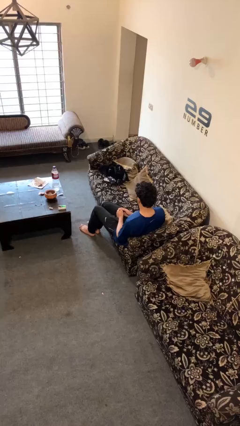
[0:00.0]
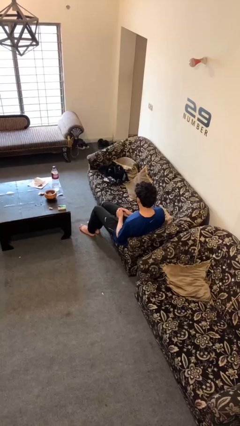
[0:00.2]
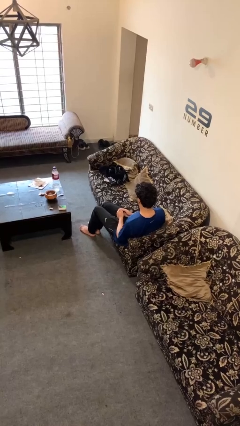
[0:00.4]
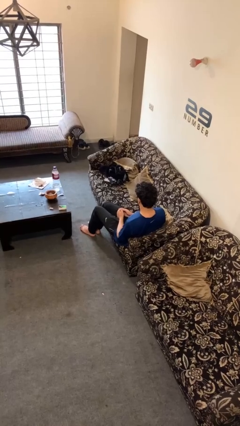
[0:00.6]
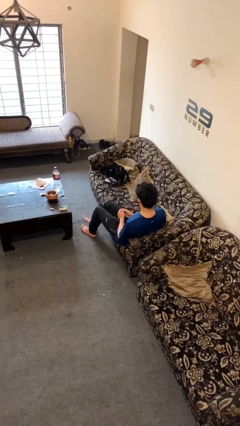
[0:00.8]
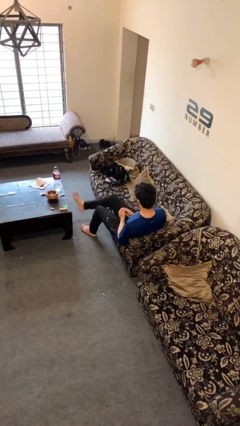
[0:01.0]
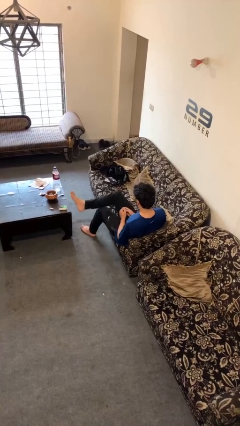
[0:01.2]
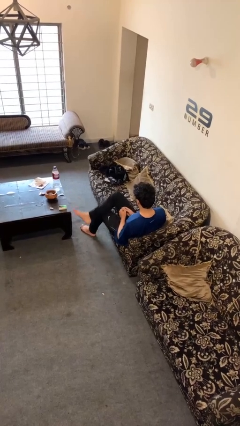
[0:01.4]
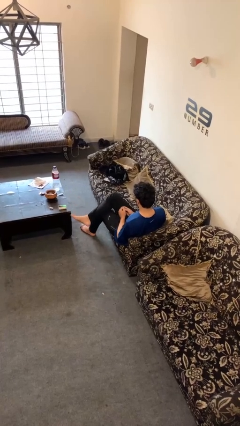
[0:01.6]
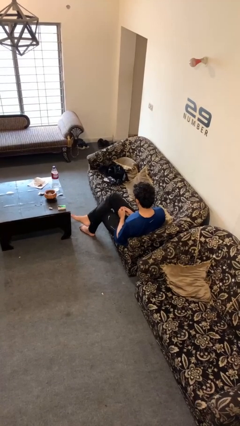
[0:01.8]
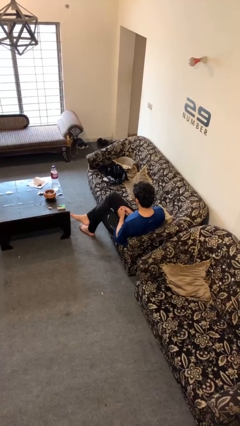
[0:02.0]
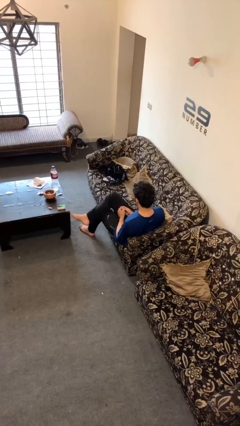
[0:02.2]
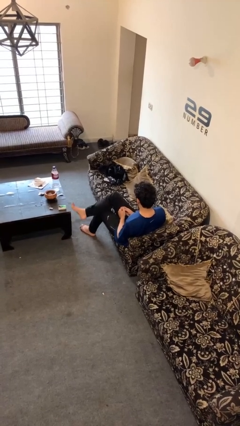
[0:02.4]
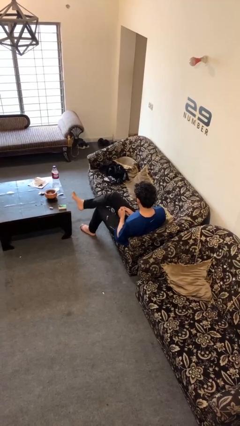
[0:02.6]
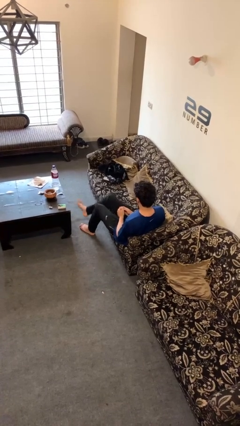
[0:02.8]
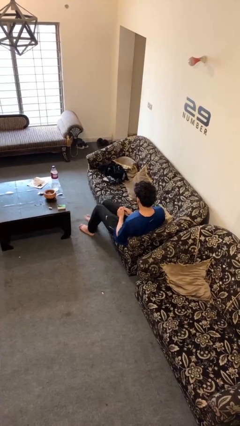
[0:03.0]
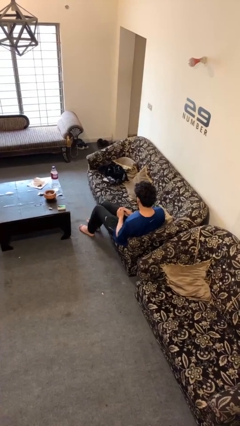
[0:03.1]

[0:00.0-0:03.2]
person crosses legs

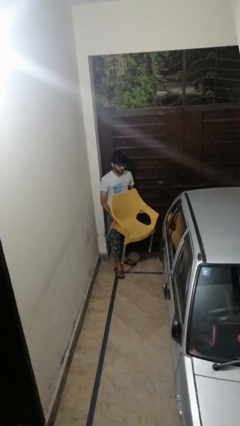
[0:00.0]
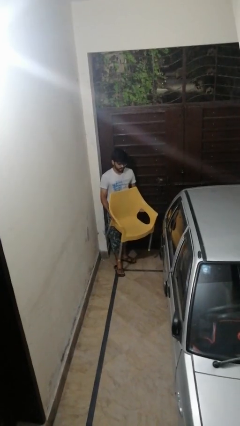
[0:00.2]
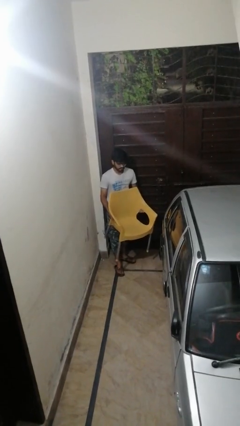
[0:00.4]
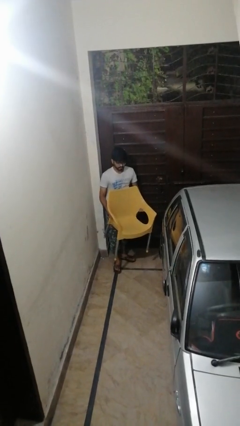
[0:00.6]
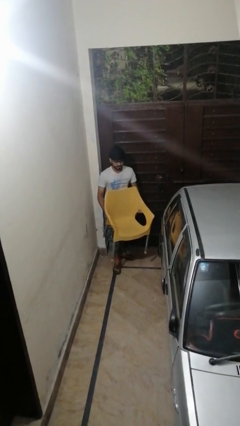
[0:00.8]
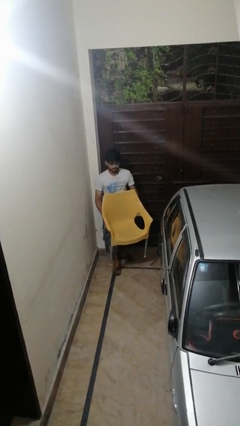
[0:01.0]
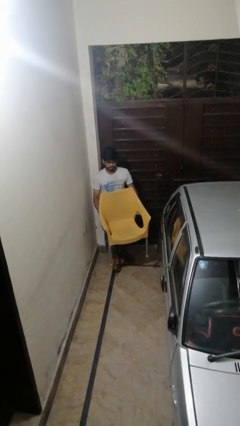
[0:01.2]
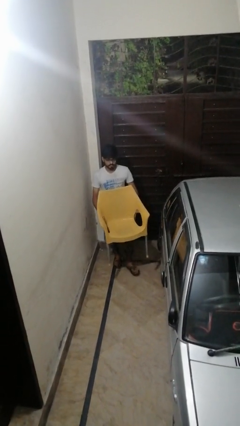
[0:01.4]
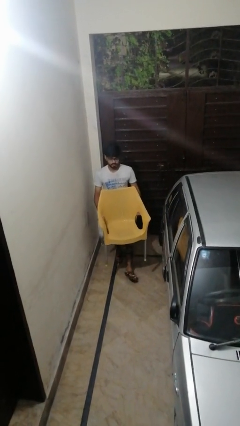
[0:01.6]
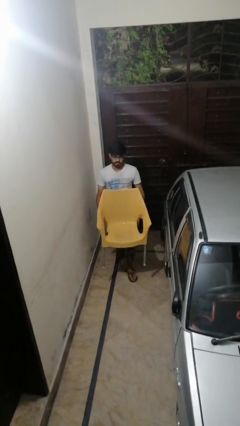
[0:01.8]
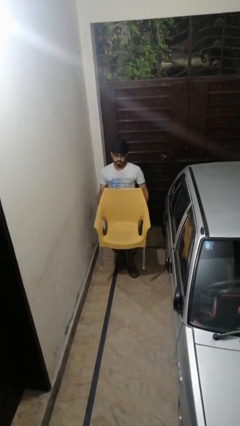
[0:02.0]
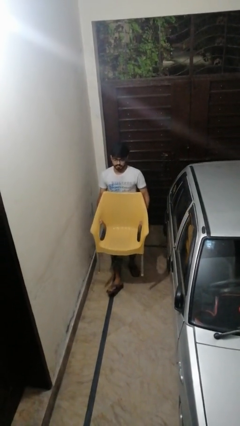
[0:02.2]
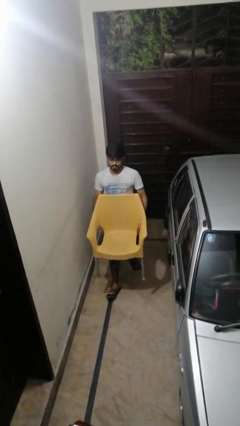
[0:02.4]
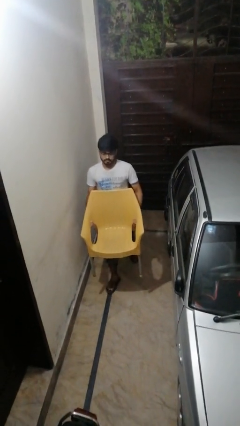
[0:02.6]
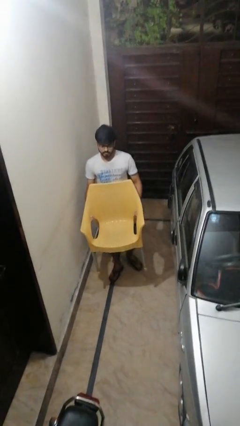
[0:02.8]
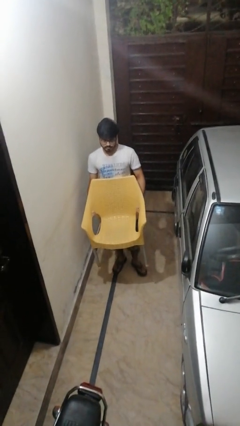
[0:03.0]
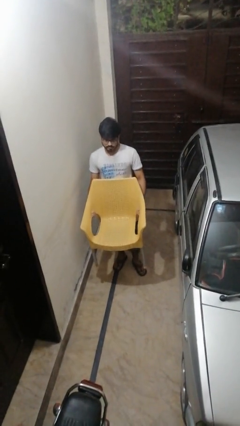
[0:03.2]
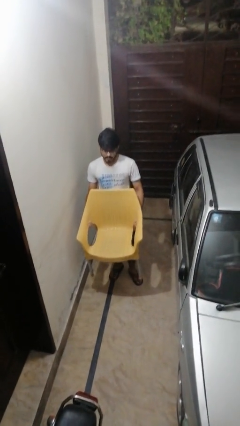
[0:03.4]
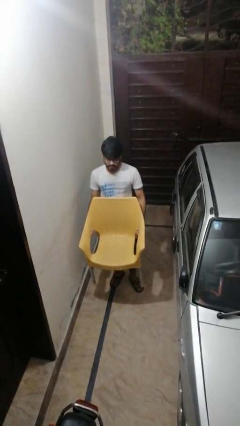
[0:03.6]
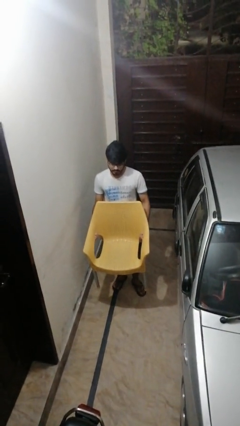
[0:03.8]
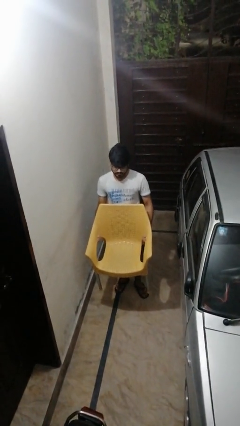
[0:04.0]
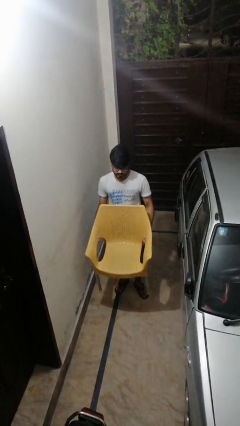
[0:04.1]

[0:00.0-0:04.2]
person carries furniture

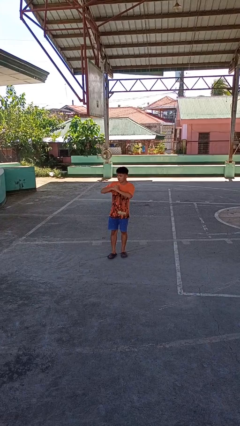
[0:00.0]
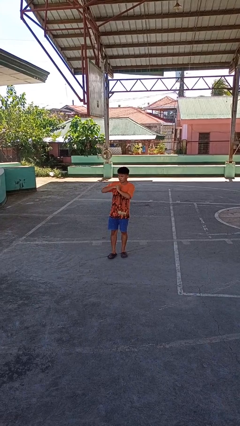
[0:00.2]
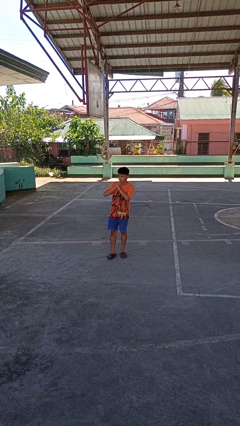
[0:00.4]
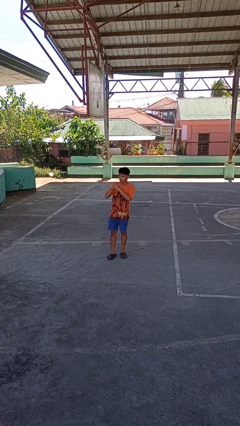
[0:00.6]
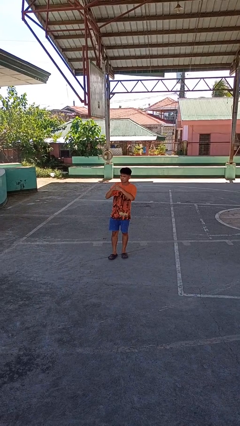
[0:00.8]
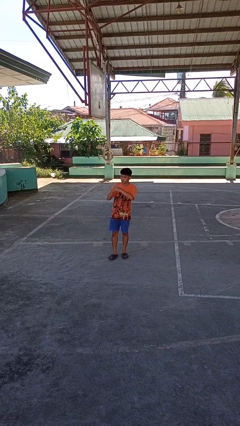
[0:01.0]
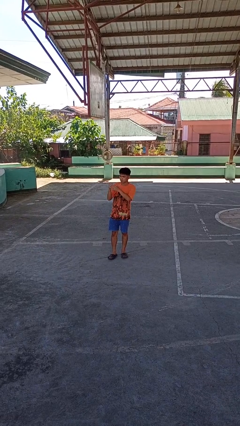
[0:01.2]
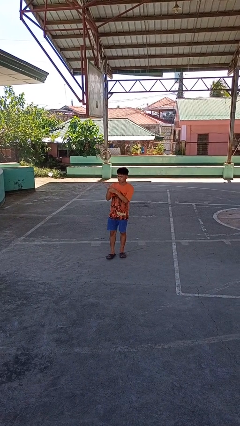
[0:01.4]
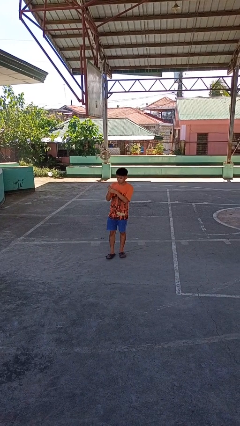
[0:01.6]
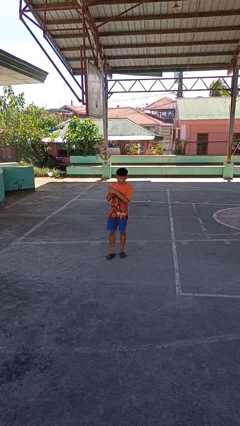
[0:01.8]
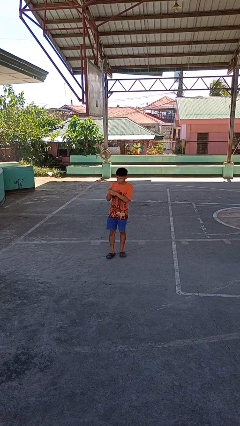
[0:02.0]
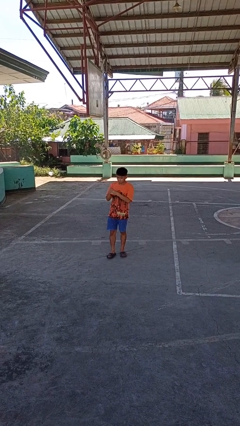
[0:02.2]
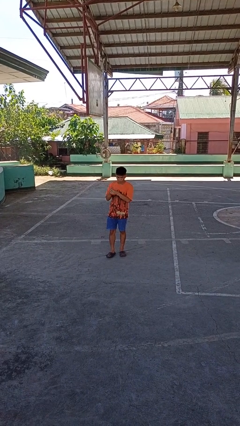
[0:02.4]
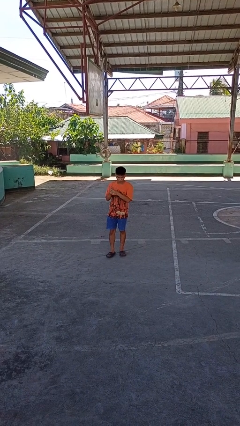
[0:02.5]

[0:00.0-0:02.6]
person cracks knuckles

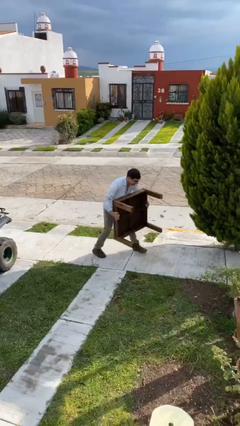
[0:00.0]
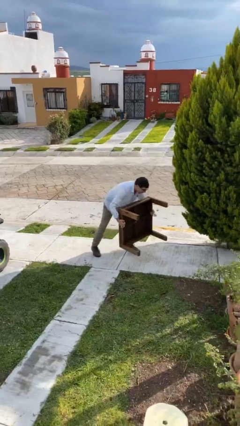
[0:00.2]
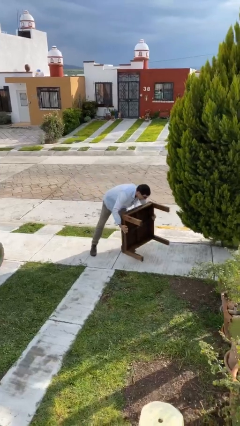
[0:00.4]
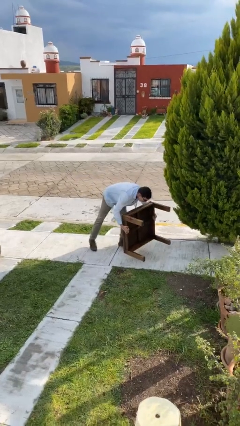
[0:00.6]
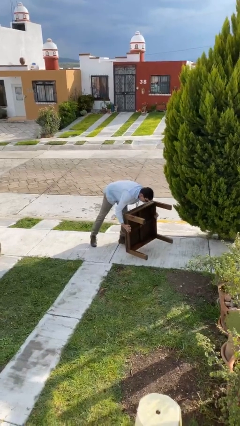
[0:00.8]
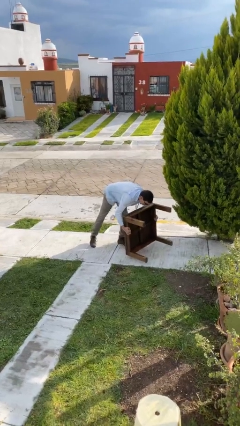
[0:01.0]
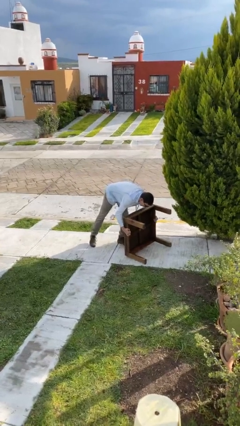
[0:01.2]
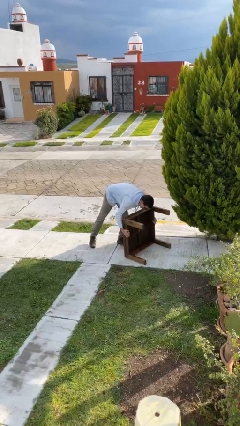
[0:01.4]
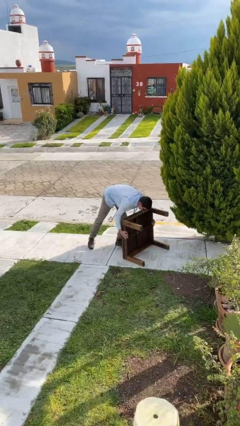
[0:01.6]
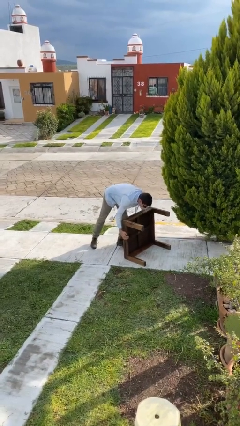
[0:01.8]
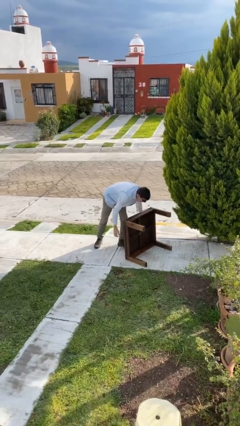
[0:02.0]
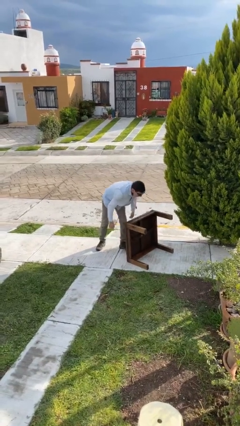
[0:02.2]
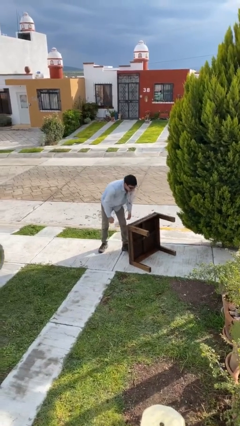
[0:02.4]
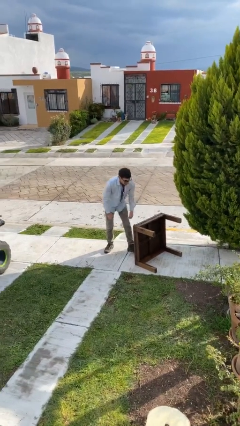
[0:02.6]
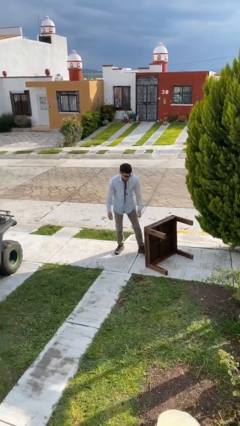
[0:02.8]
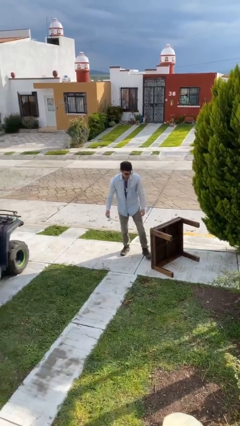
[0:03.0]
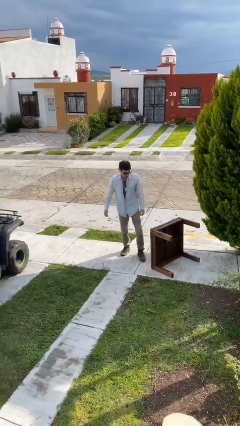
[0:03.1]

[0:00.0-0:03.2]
person puts down object on floor

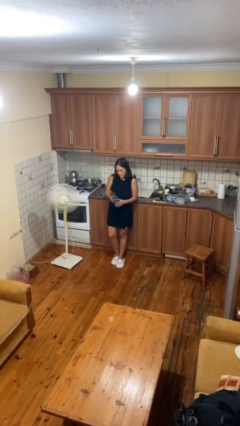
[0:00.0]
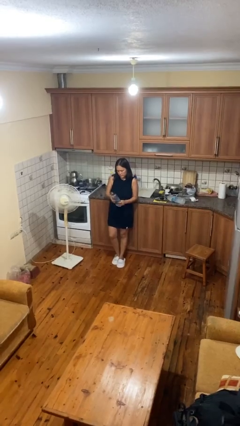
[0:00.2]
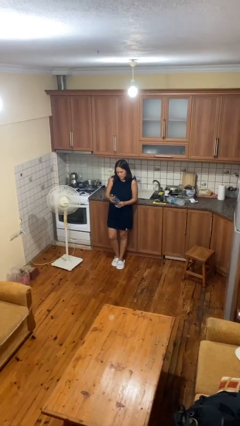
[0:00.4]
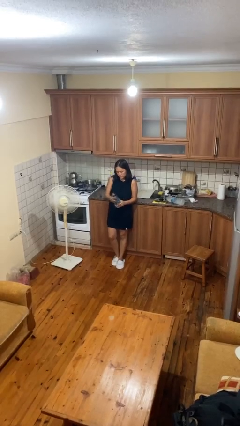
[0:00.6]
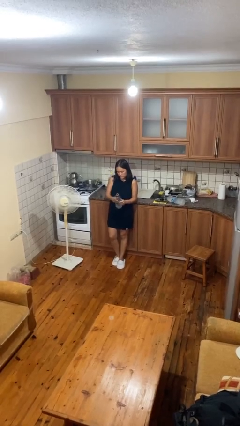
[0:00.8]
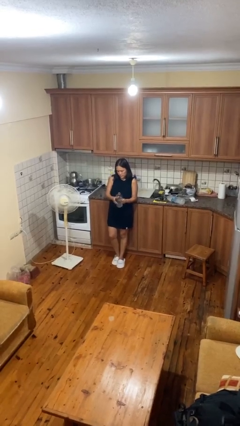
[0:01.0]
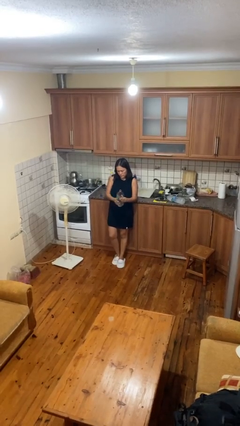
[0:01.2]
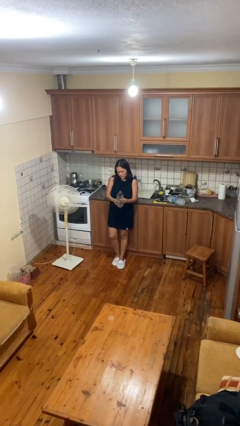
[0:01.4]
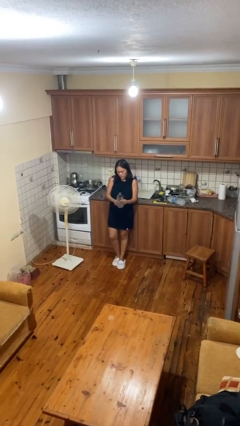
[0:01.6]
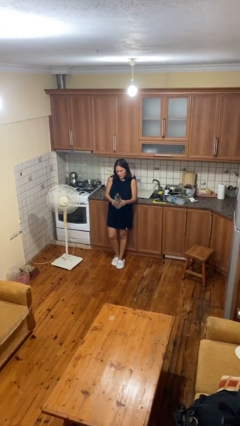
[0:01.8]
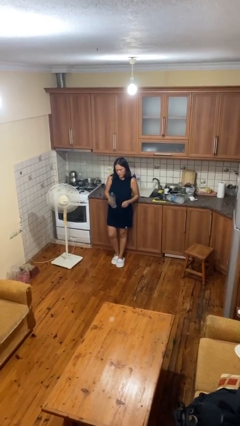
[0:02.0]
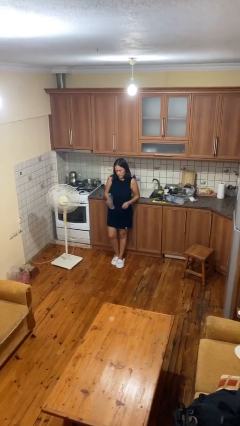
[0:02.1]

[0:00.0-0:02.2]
person squeezes object

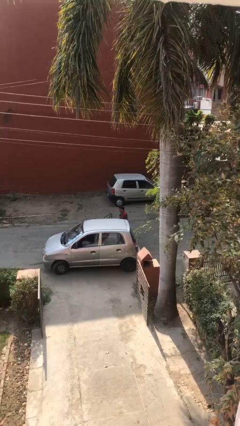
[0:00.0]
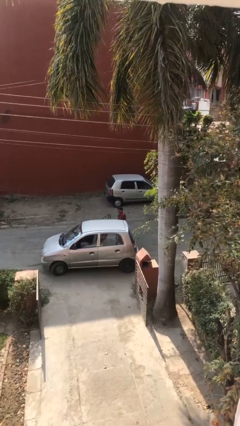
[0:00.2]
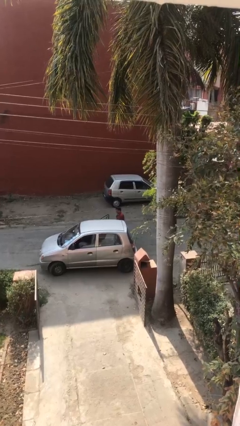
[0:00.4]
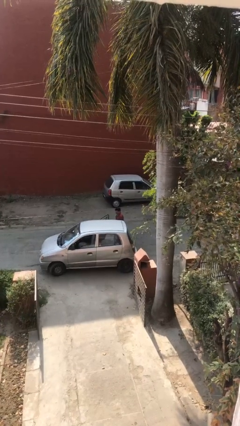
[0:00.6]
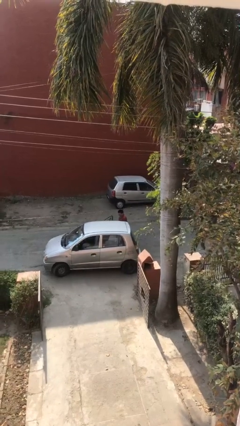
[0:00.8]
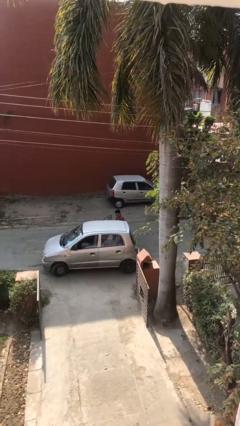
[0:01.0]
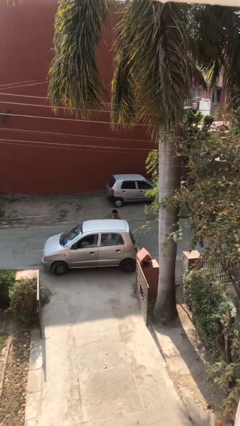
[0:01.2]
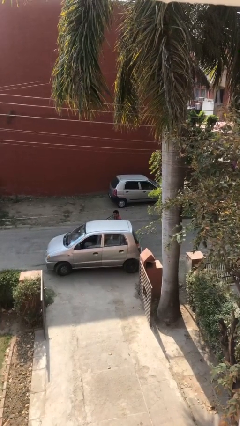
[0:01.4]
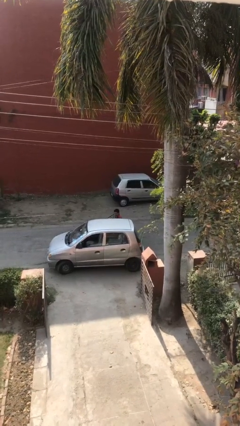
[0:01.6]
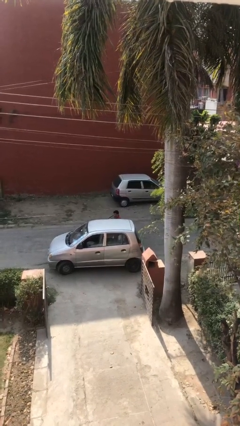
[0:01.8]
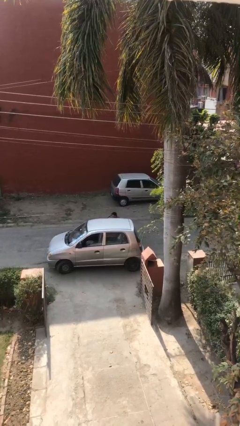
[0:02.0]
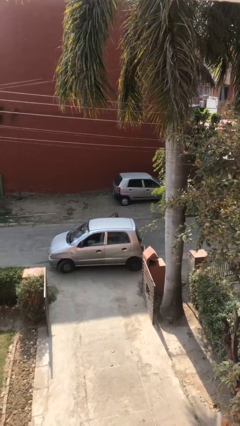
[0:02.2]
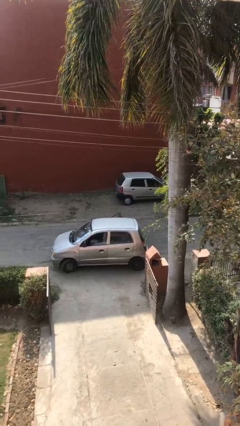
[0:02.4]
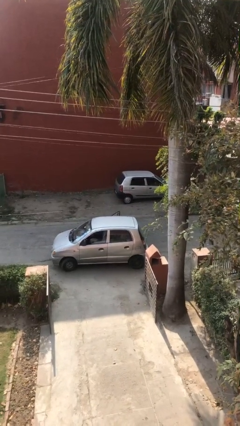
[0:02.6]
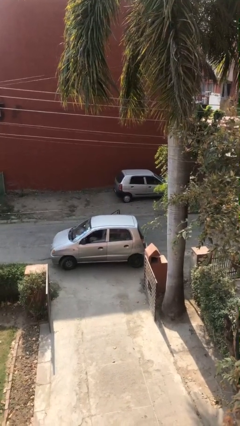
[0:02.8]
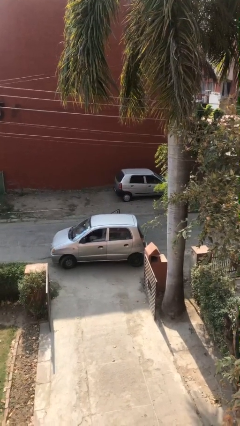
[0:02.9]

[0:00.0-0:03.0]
person enters car
